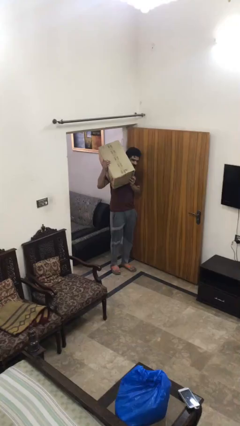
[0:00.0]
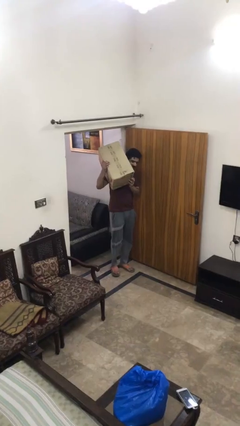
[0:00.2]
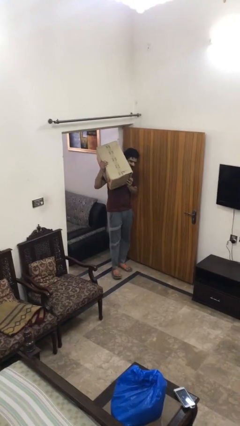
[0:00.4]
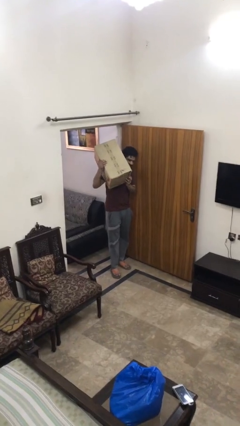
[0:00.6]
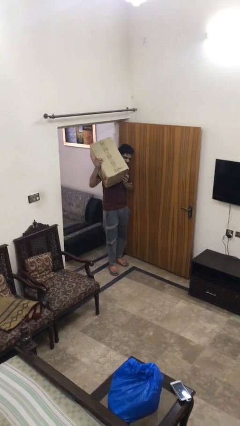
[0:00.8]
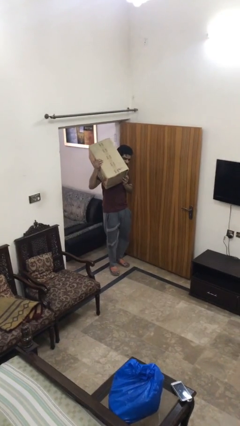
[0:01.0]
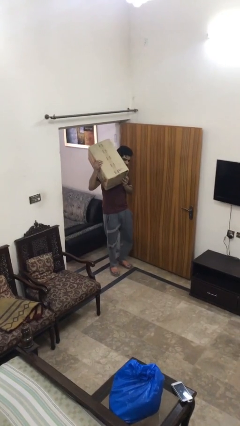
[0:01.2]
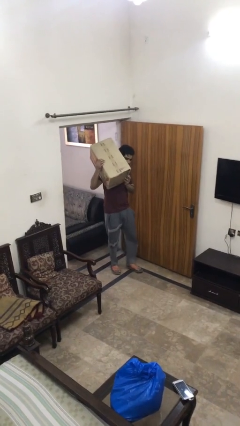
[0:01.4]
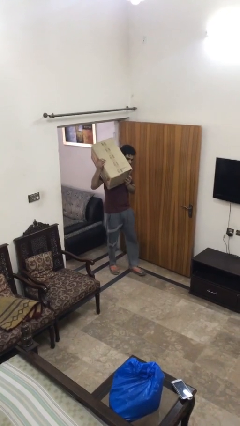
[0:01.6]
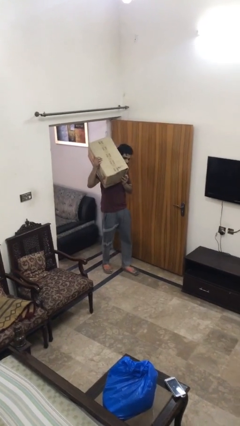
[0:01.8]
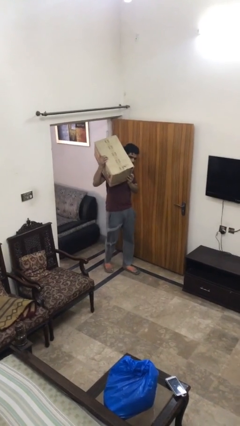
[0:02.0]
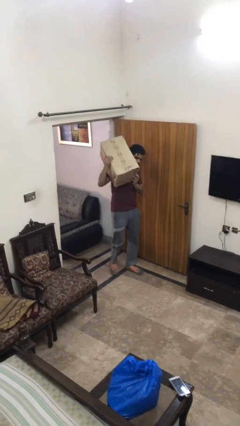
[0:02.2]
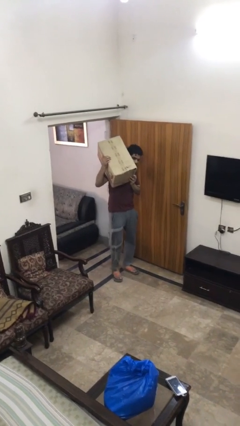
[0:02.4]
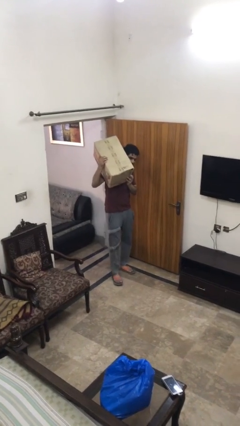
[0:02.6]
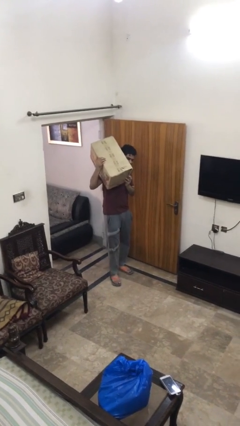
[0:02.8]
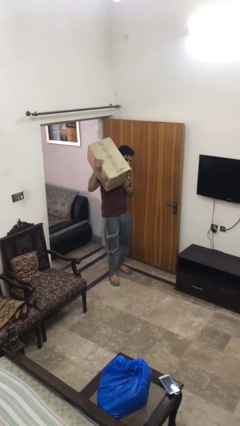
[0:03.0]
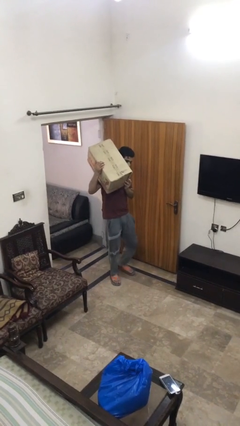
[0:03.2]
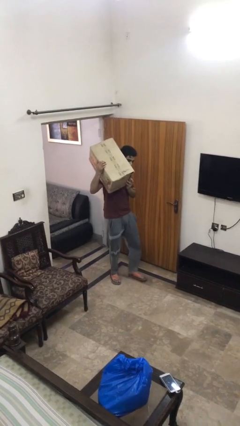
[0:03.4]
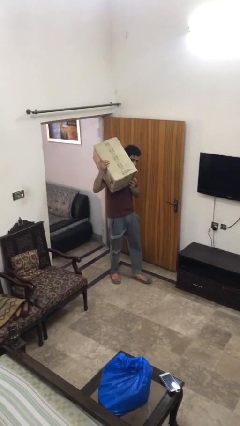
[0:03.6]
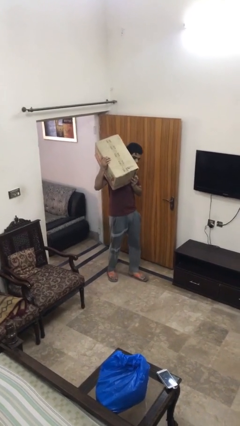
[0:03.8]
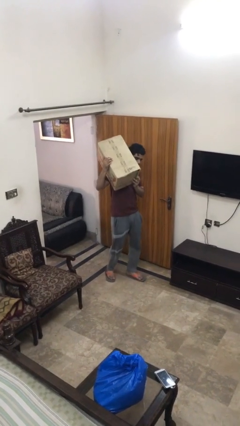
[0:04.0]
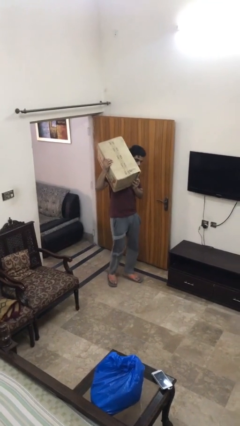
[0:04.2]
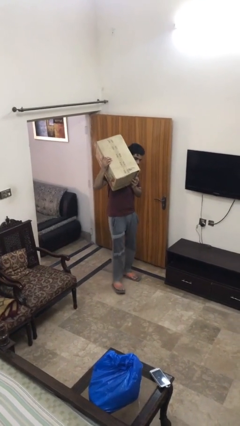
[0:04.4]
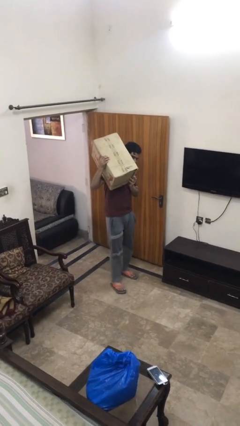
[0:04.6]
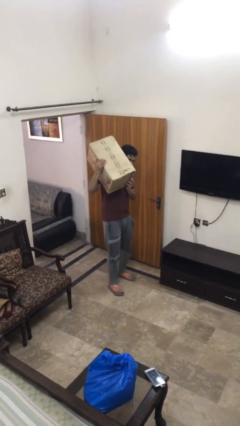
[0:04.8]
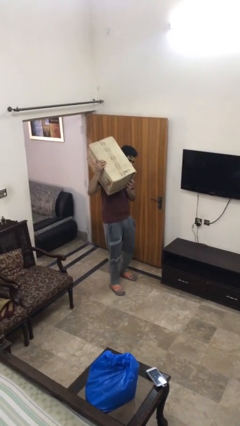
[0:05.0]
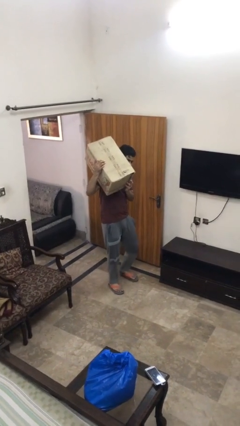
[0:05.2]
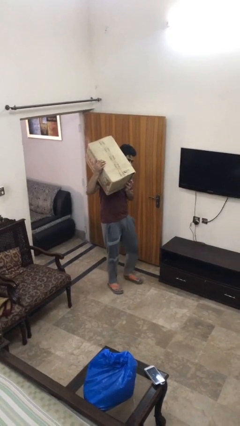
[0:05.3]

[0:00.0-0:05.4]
person carries heavy object

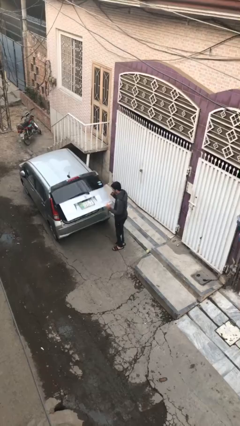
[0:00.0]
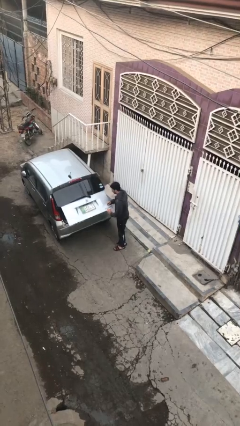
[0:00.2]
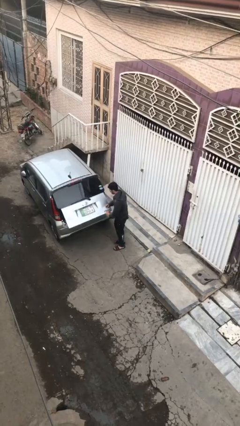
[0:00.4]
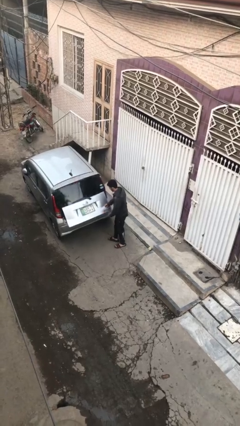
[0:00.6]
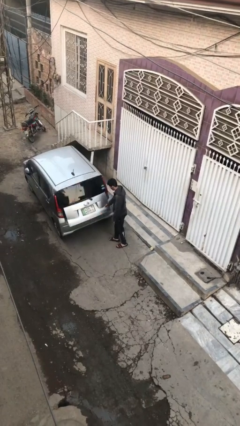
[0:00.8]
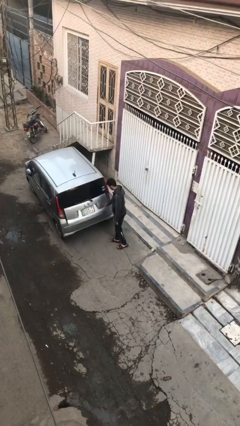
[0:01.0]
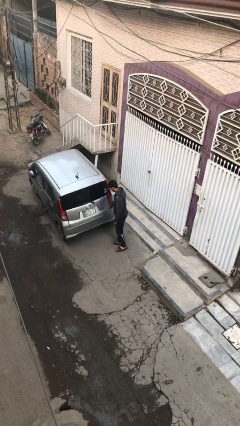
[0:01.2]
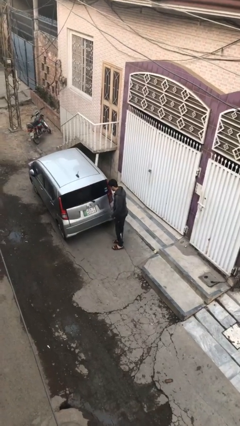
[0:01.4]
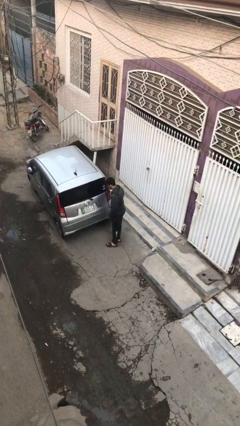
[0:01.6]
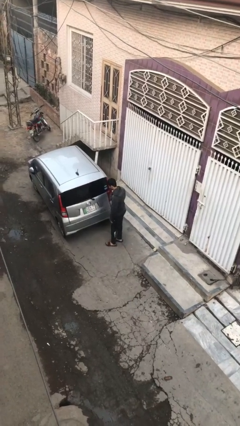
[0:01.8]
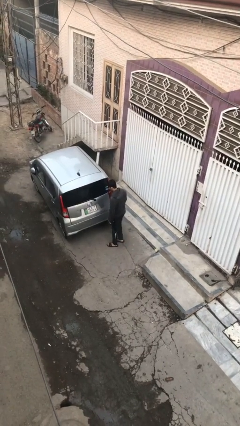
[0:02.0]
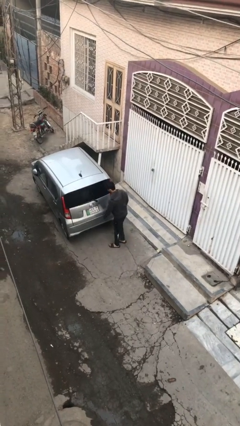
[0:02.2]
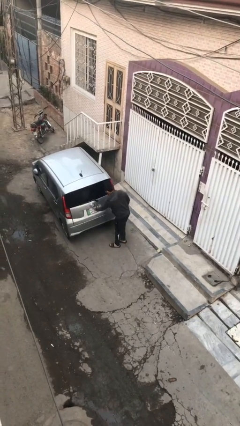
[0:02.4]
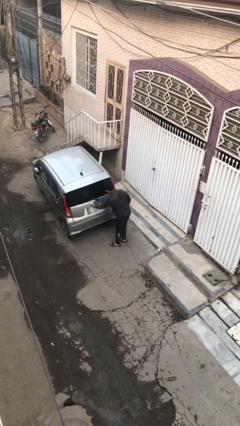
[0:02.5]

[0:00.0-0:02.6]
person closes car trunk

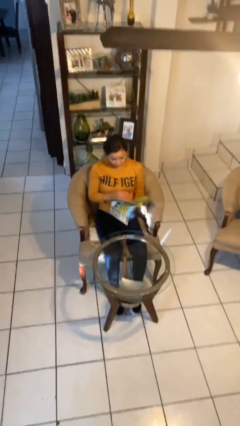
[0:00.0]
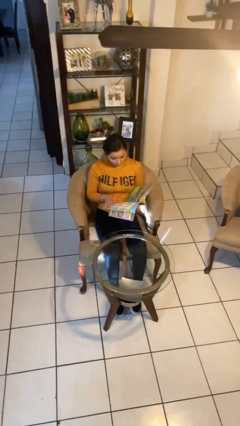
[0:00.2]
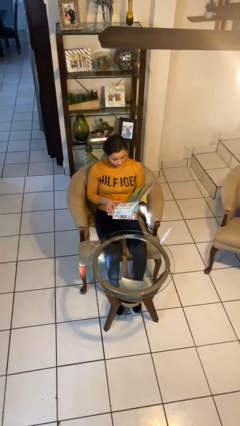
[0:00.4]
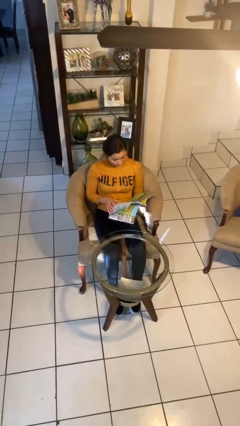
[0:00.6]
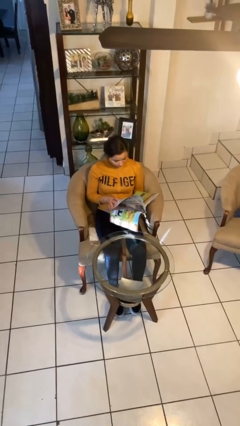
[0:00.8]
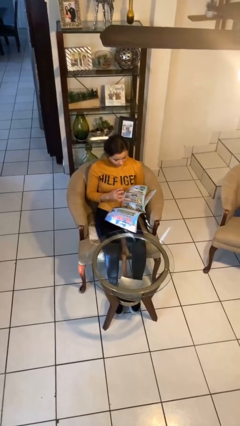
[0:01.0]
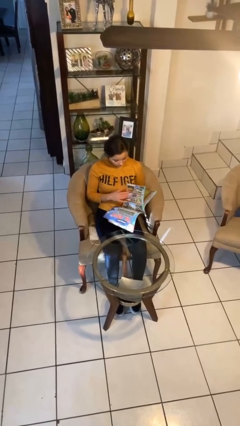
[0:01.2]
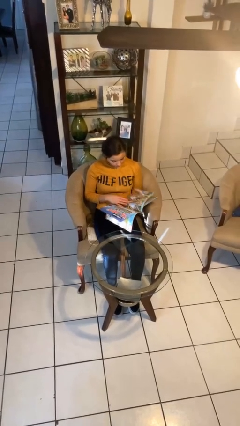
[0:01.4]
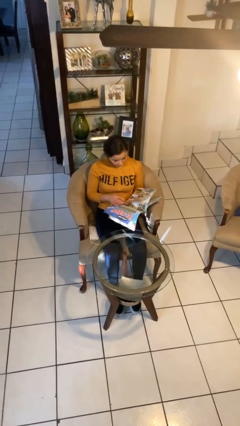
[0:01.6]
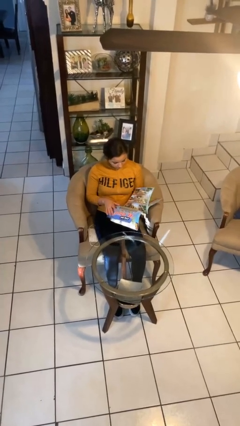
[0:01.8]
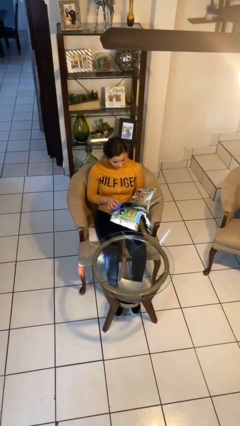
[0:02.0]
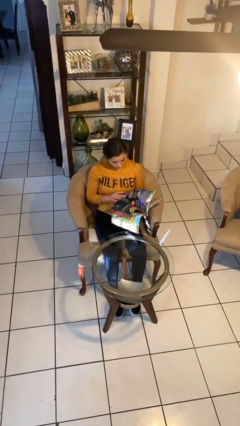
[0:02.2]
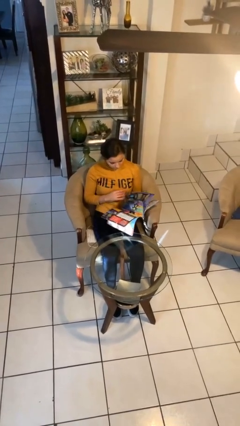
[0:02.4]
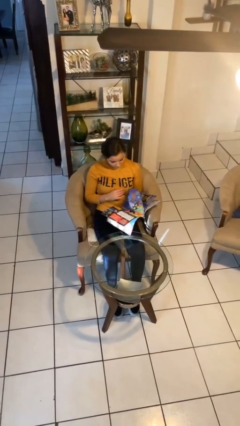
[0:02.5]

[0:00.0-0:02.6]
person reads magazine

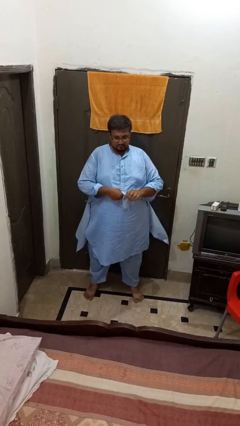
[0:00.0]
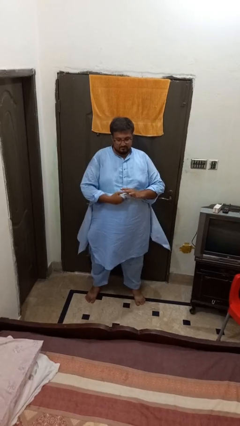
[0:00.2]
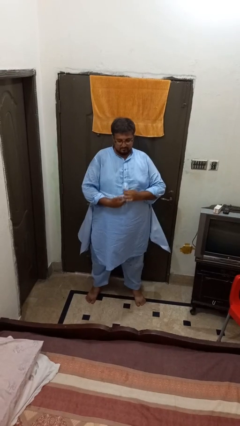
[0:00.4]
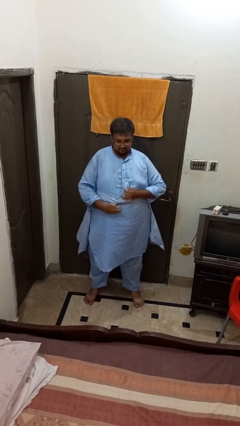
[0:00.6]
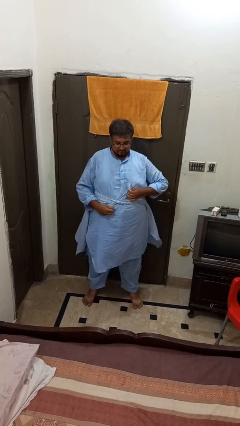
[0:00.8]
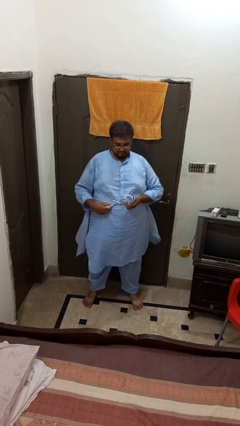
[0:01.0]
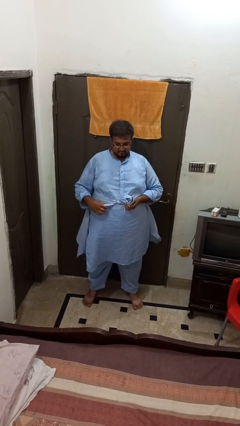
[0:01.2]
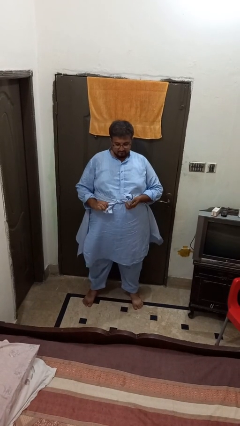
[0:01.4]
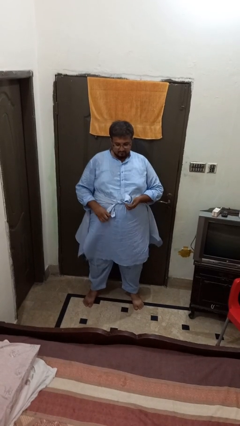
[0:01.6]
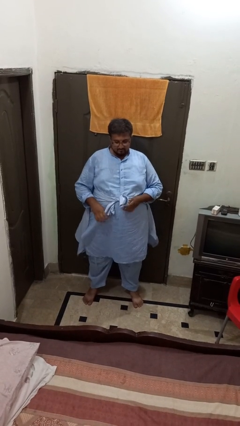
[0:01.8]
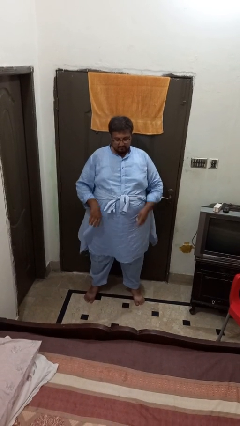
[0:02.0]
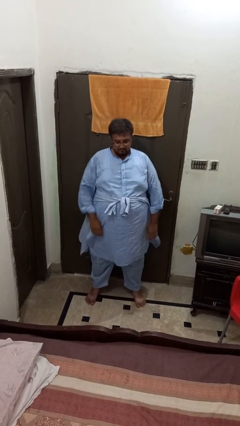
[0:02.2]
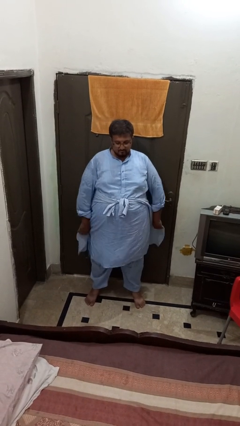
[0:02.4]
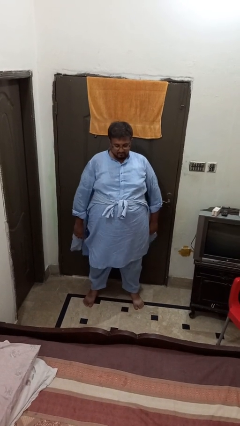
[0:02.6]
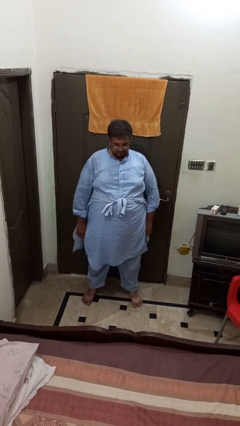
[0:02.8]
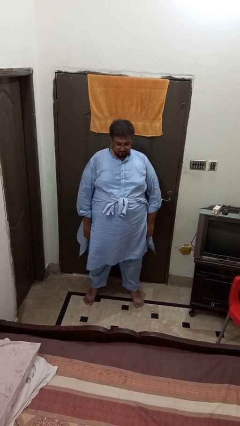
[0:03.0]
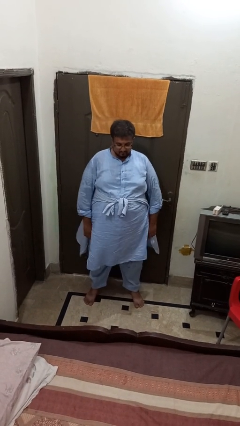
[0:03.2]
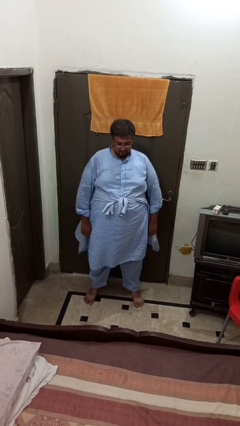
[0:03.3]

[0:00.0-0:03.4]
person ties jacket around waist

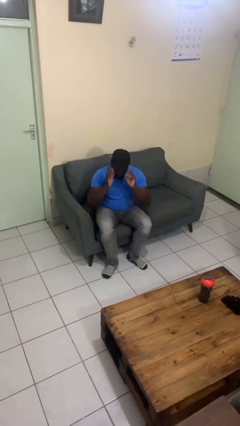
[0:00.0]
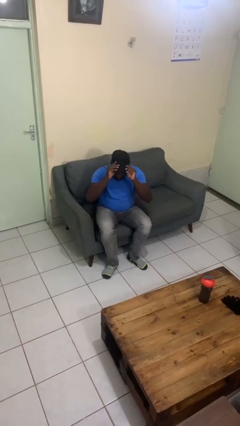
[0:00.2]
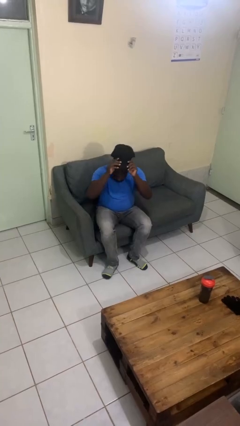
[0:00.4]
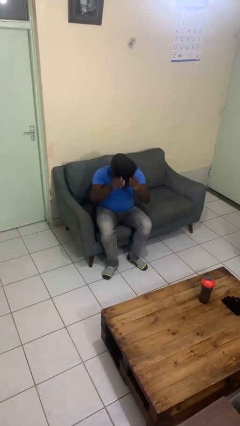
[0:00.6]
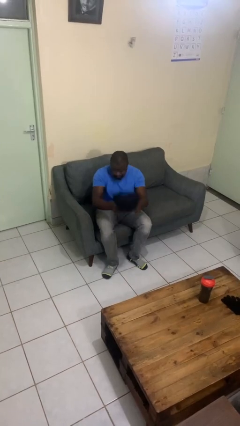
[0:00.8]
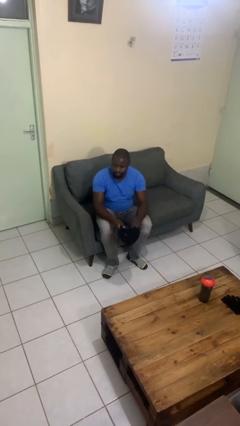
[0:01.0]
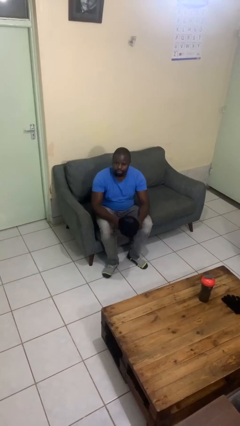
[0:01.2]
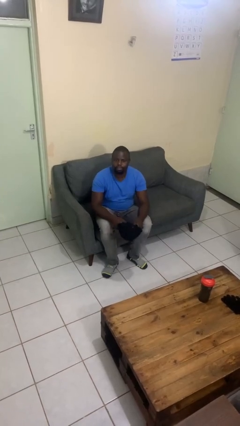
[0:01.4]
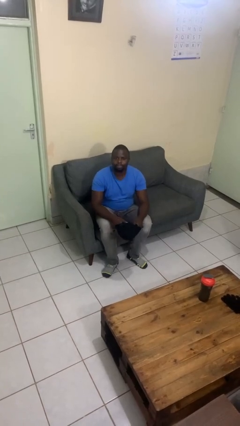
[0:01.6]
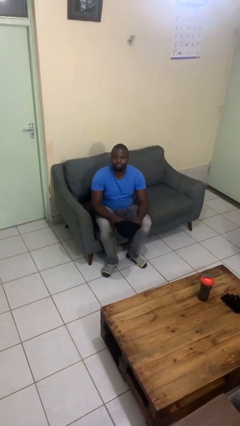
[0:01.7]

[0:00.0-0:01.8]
person takes off hat

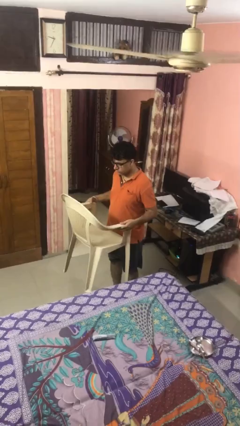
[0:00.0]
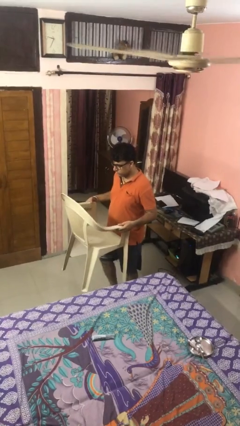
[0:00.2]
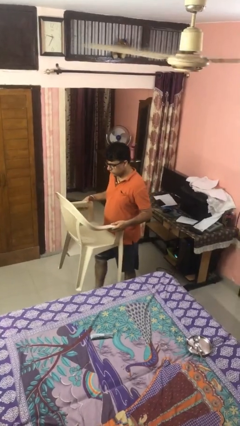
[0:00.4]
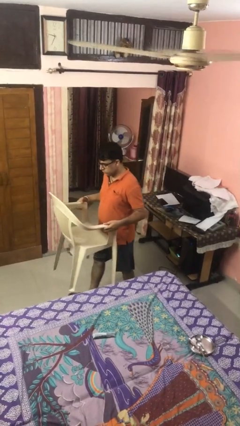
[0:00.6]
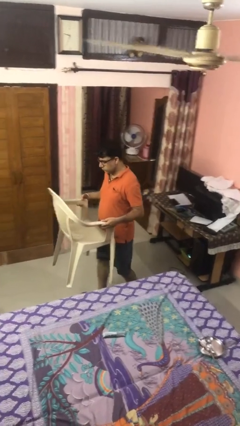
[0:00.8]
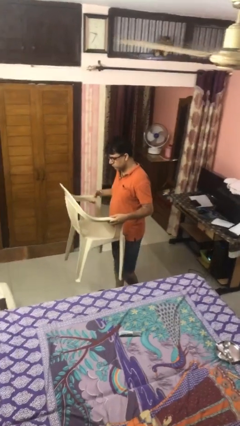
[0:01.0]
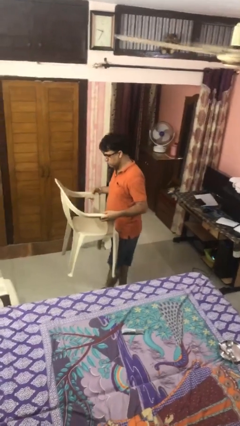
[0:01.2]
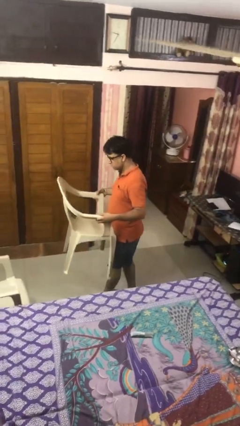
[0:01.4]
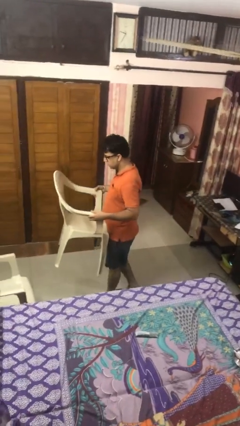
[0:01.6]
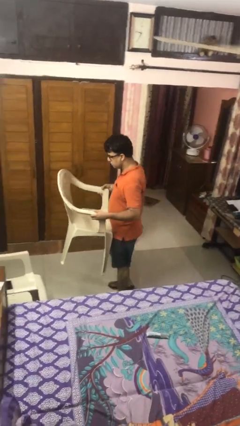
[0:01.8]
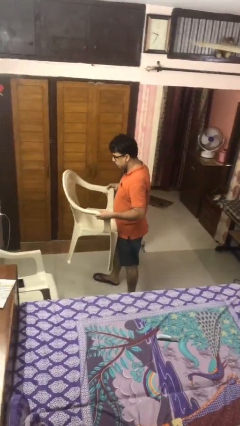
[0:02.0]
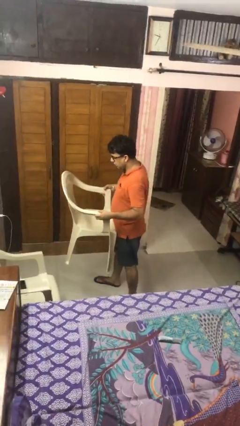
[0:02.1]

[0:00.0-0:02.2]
person carries furniture
